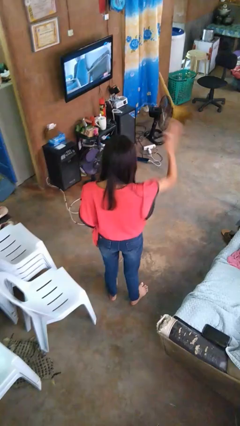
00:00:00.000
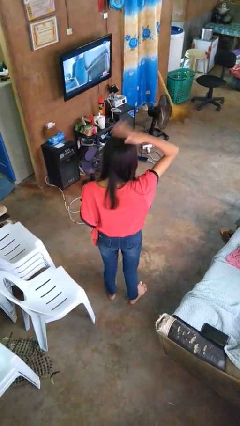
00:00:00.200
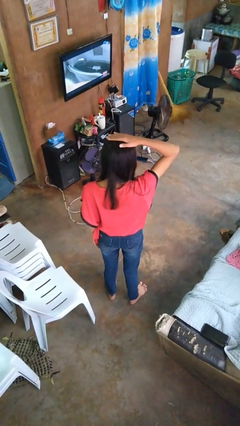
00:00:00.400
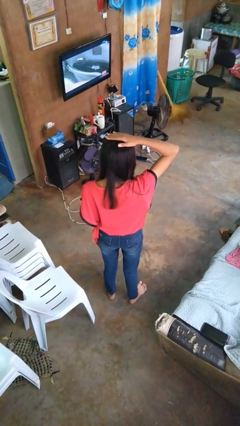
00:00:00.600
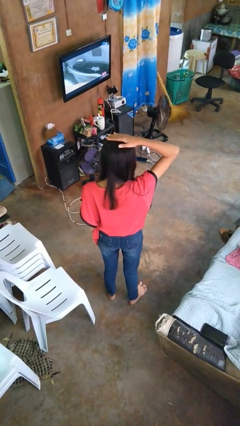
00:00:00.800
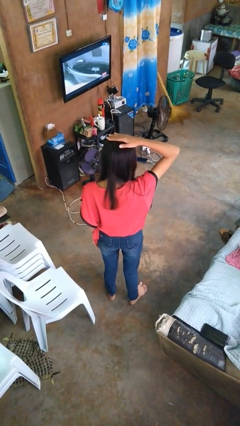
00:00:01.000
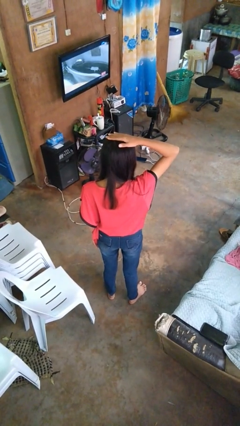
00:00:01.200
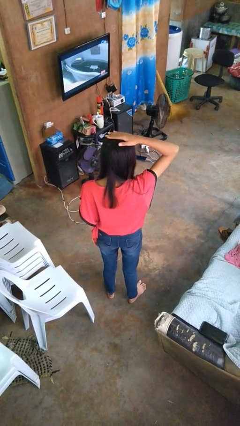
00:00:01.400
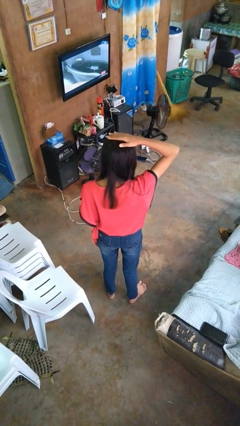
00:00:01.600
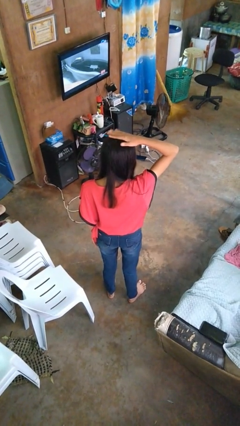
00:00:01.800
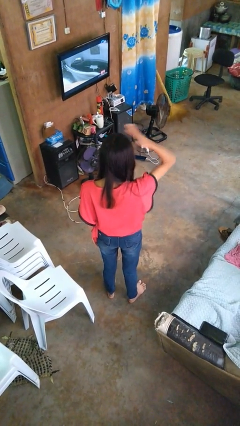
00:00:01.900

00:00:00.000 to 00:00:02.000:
person pats head

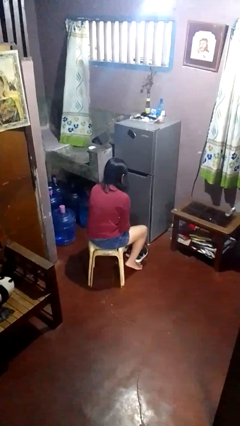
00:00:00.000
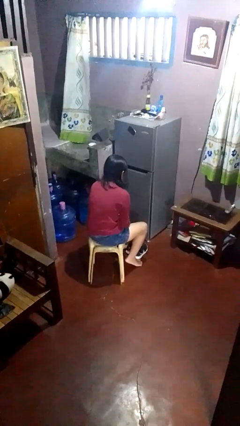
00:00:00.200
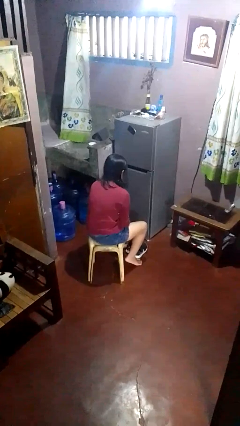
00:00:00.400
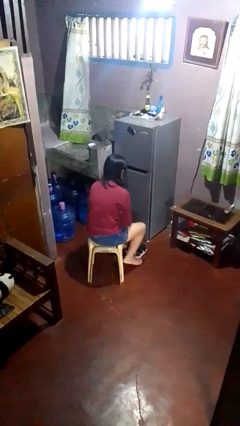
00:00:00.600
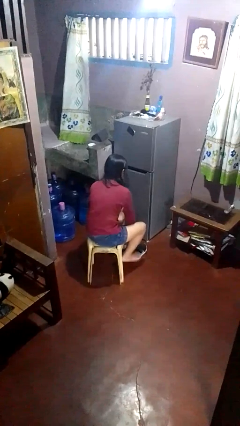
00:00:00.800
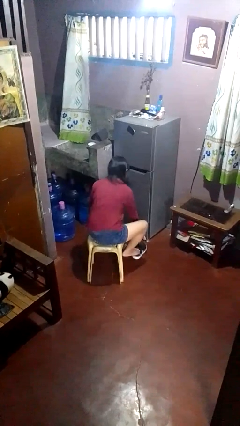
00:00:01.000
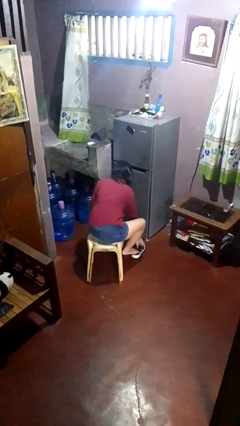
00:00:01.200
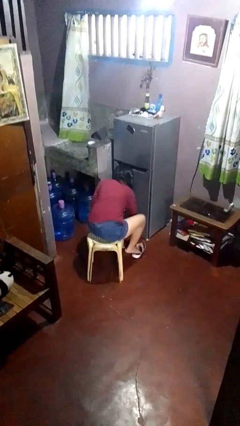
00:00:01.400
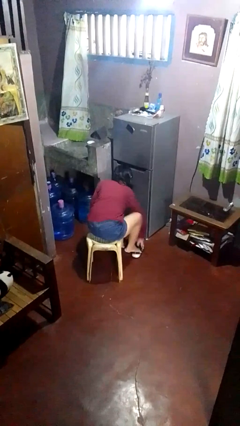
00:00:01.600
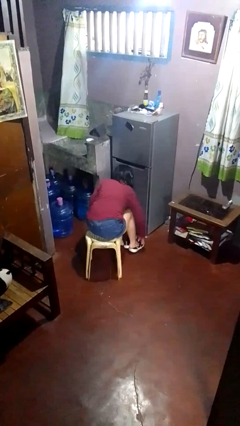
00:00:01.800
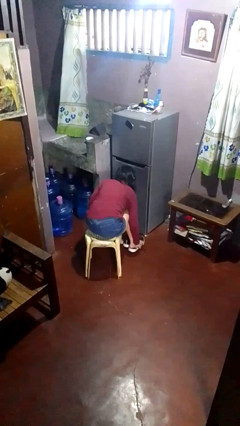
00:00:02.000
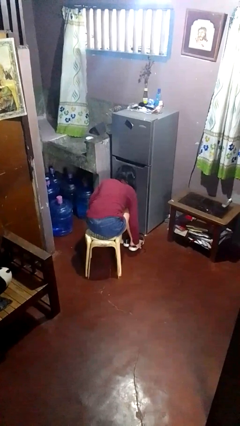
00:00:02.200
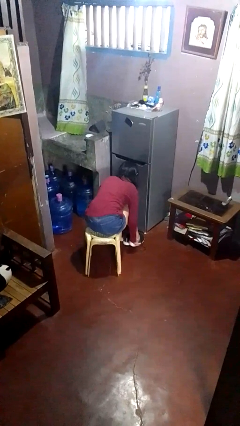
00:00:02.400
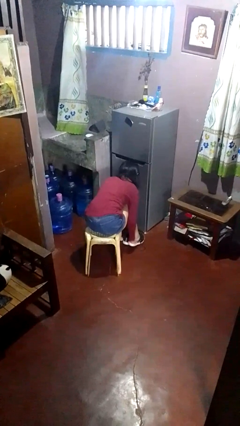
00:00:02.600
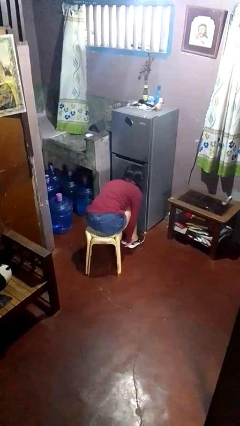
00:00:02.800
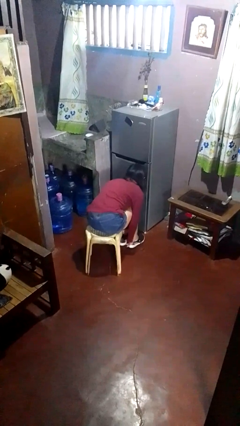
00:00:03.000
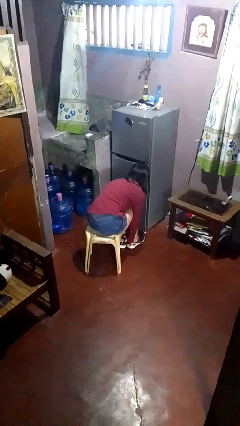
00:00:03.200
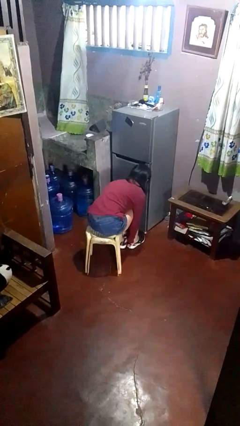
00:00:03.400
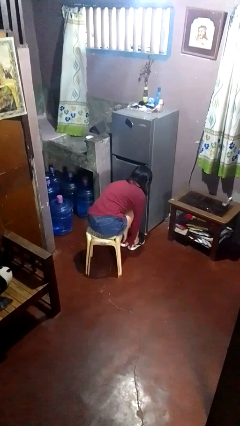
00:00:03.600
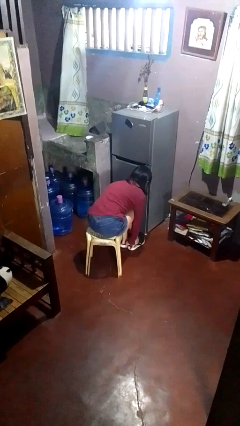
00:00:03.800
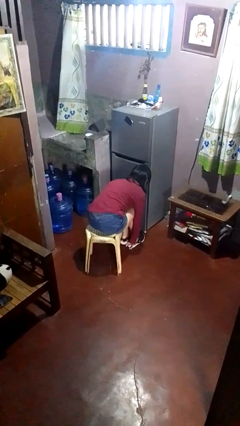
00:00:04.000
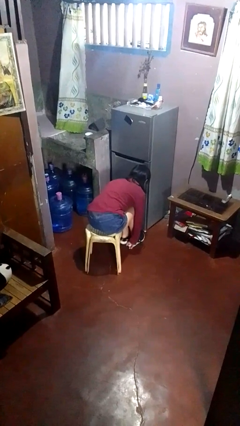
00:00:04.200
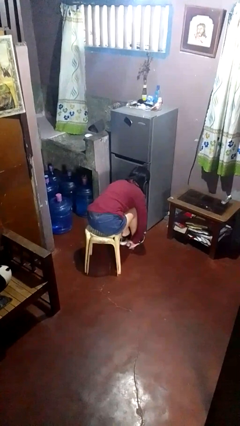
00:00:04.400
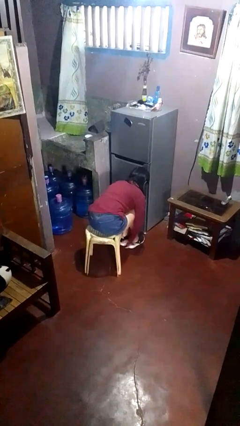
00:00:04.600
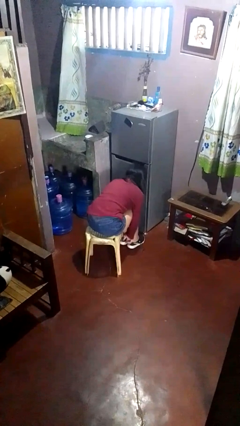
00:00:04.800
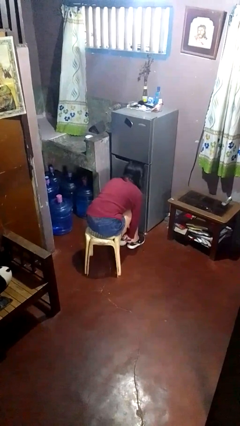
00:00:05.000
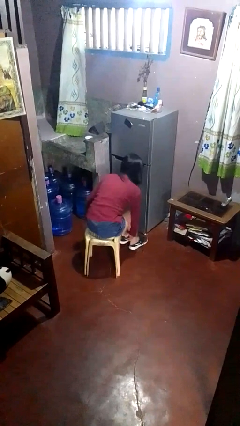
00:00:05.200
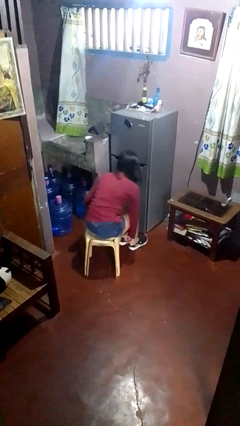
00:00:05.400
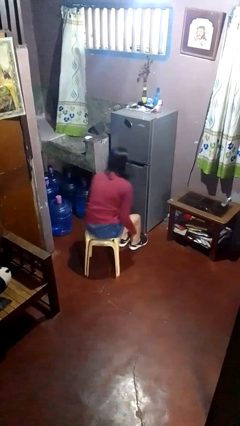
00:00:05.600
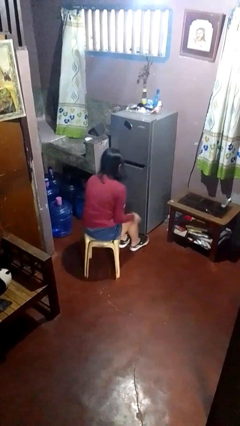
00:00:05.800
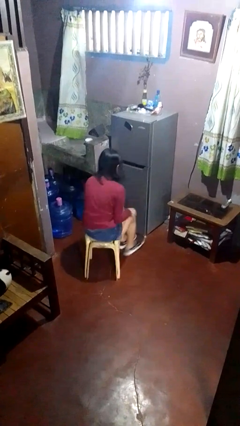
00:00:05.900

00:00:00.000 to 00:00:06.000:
person puts on shoes

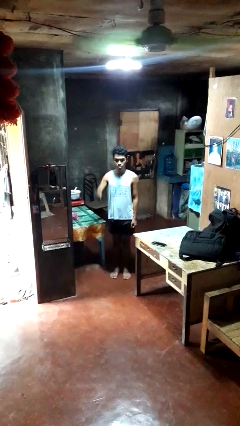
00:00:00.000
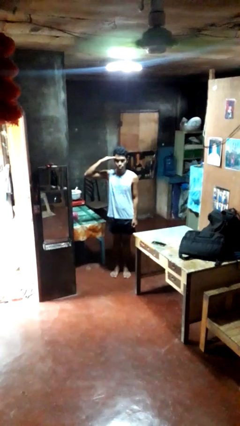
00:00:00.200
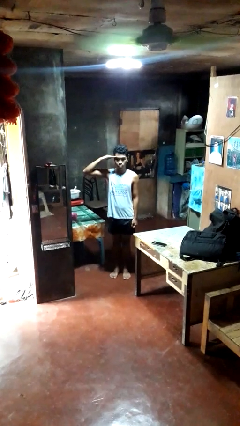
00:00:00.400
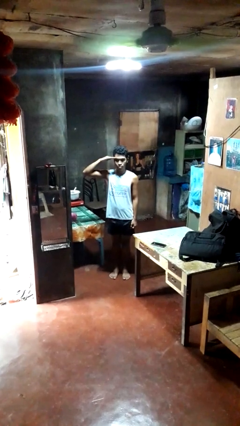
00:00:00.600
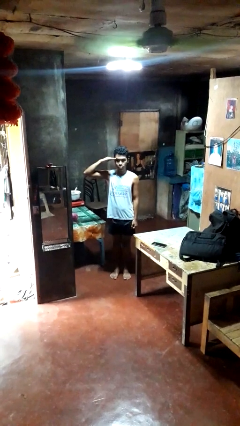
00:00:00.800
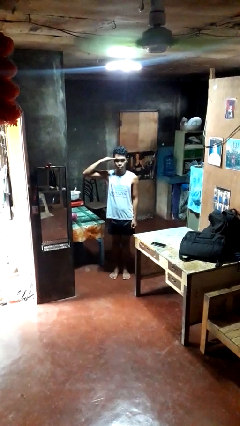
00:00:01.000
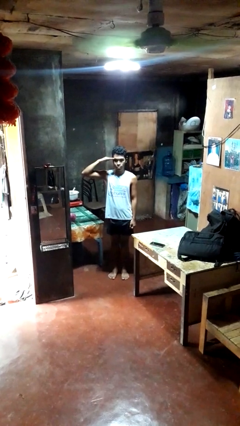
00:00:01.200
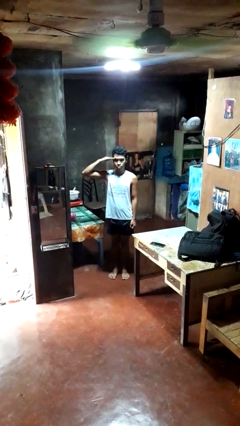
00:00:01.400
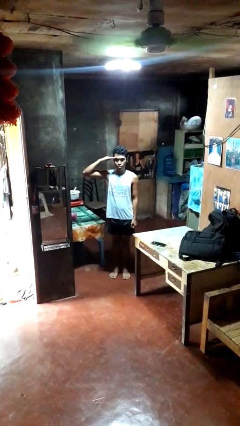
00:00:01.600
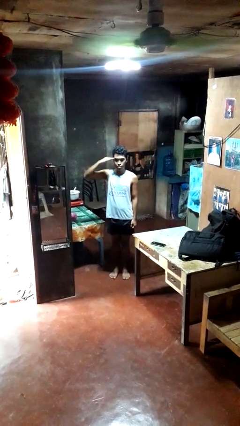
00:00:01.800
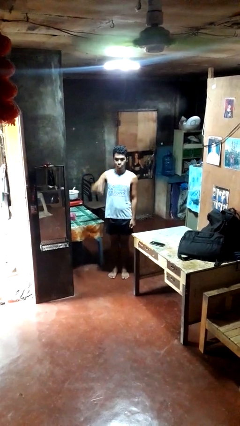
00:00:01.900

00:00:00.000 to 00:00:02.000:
person salutes

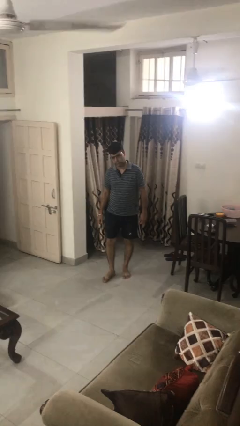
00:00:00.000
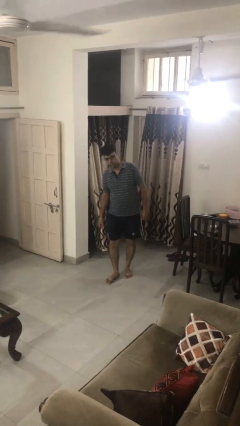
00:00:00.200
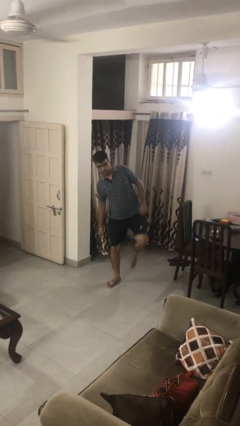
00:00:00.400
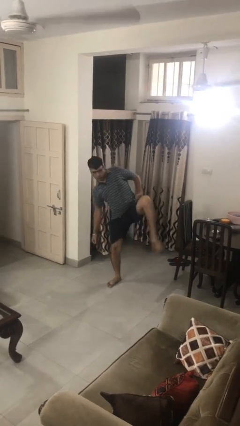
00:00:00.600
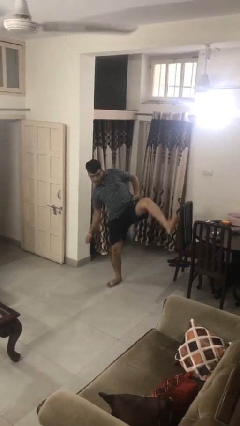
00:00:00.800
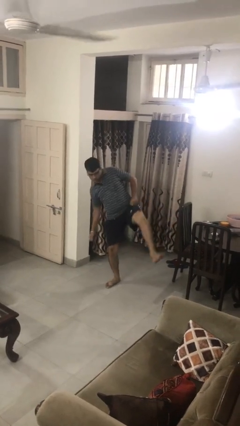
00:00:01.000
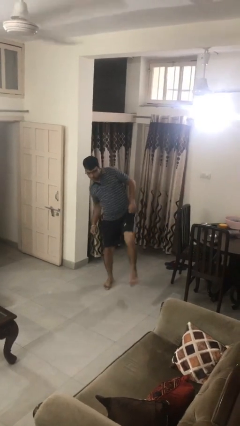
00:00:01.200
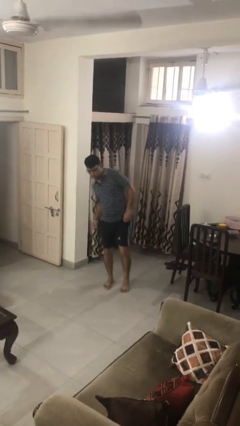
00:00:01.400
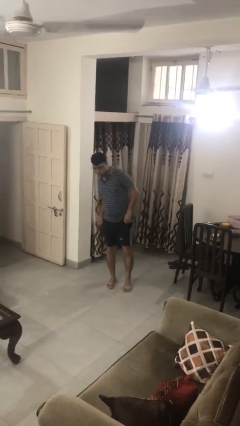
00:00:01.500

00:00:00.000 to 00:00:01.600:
person karate kicks

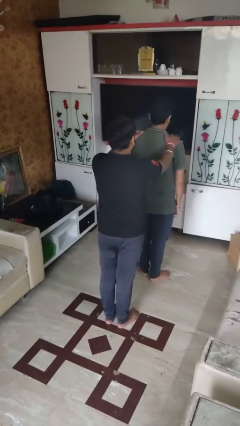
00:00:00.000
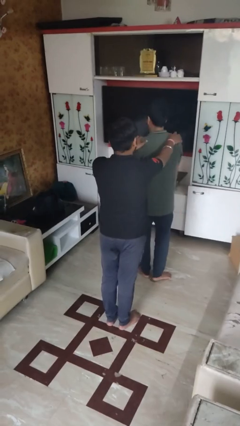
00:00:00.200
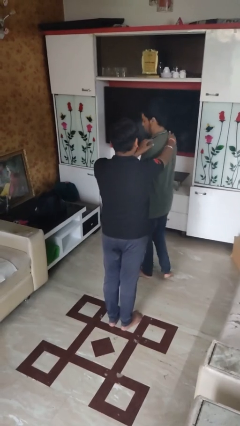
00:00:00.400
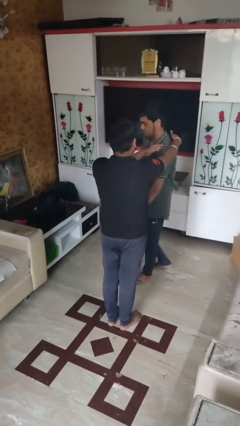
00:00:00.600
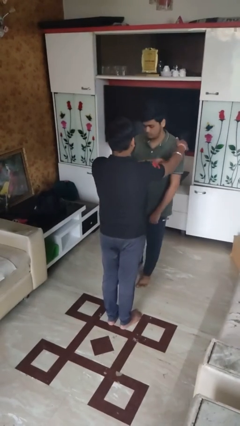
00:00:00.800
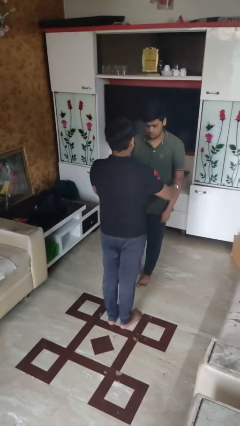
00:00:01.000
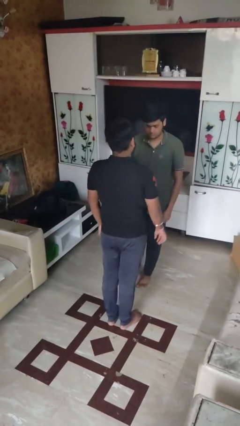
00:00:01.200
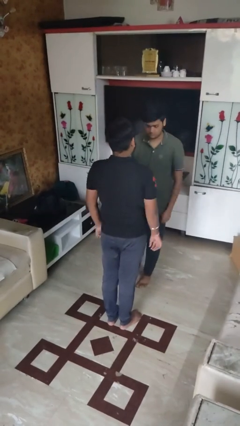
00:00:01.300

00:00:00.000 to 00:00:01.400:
person spins person around

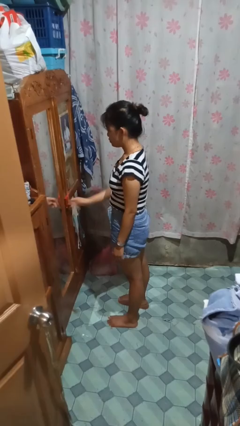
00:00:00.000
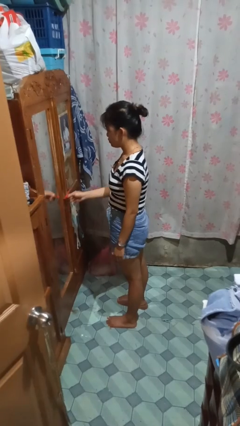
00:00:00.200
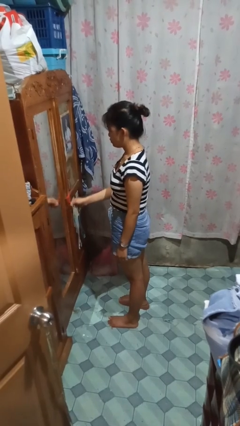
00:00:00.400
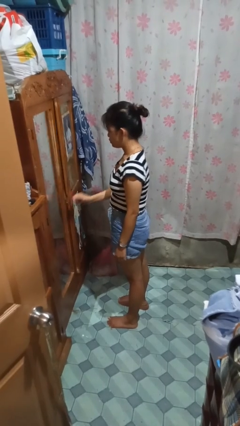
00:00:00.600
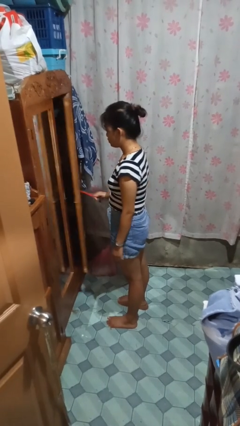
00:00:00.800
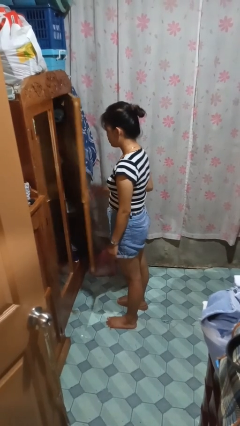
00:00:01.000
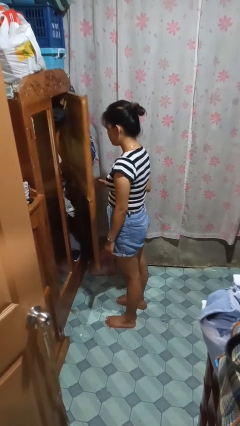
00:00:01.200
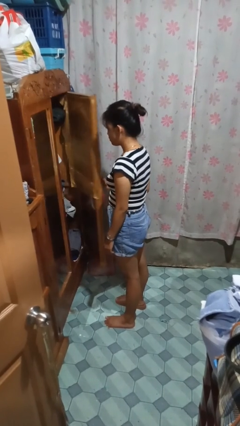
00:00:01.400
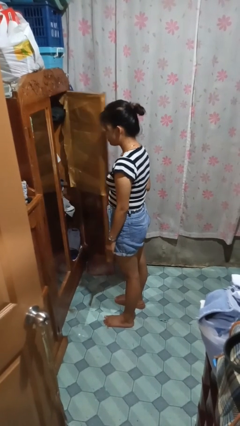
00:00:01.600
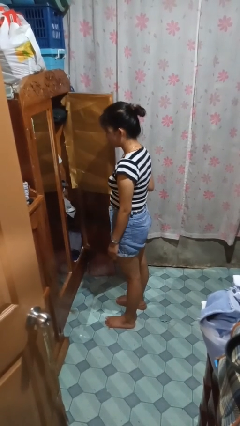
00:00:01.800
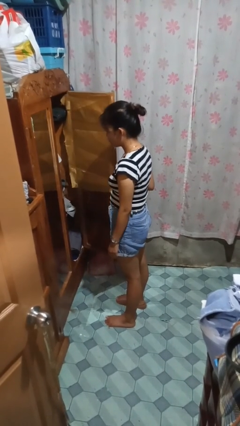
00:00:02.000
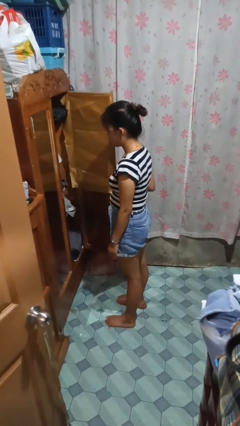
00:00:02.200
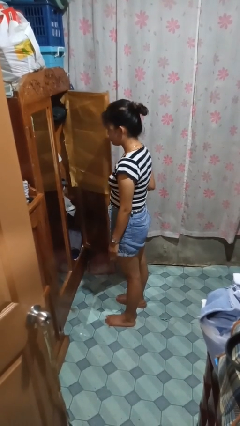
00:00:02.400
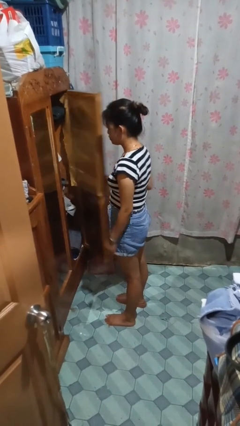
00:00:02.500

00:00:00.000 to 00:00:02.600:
person opens closet door

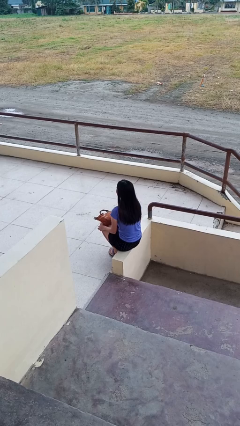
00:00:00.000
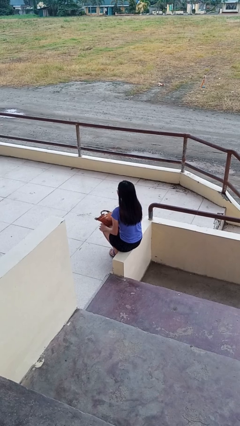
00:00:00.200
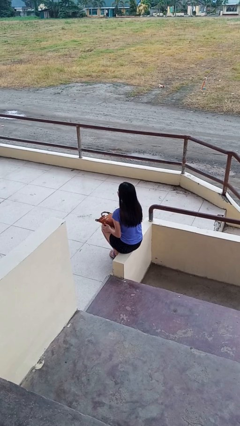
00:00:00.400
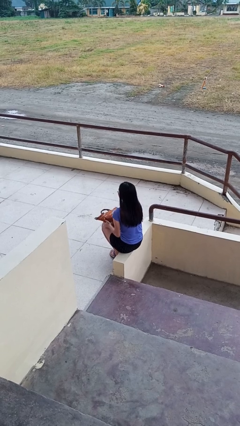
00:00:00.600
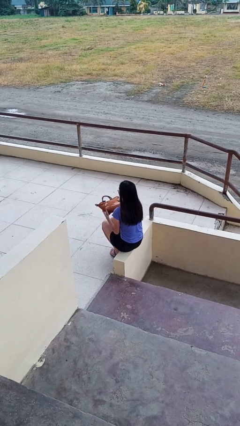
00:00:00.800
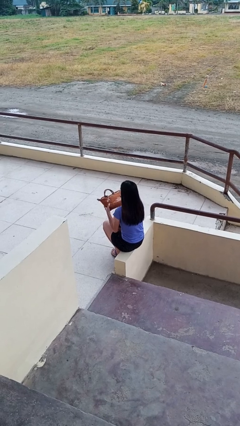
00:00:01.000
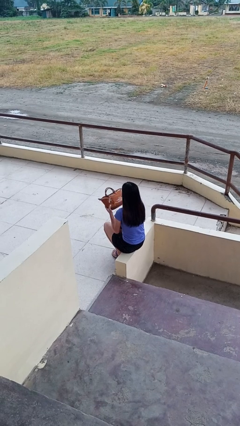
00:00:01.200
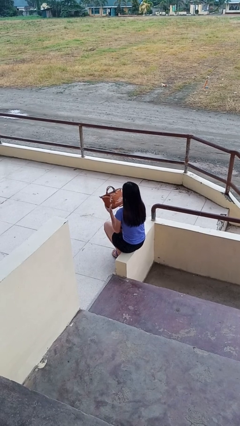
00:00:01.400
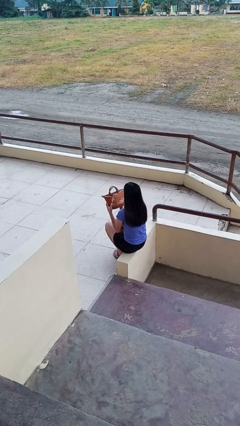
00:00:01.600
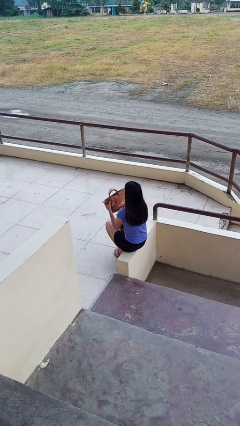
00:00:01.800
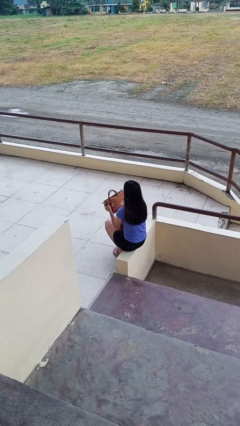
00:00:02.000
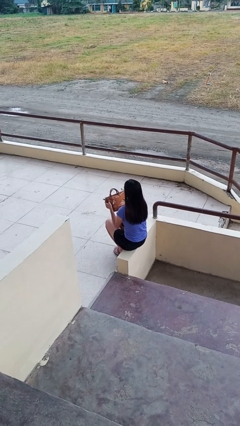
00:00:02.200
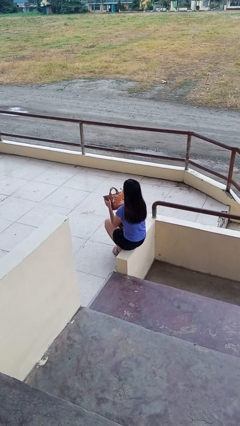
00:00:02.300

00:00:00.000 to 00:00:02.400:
person taps object with finger
